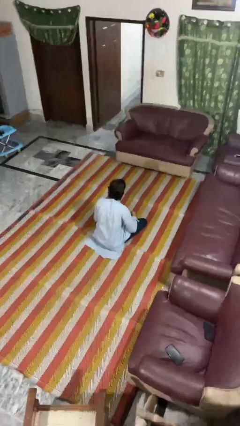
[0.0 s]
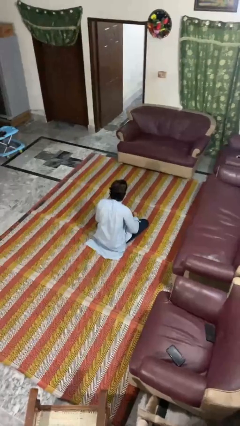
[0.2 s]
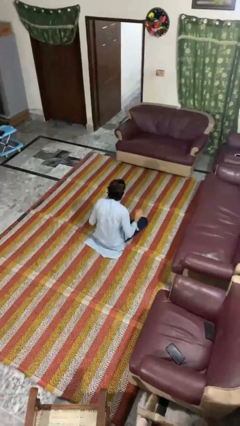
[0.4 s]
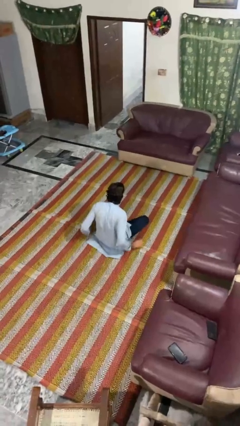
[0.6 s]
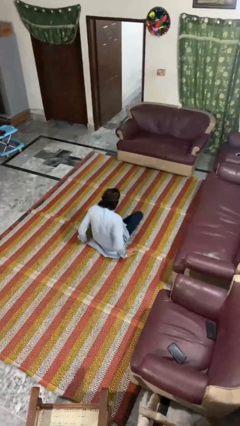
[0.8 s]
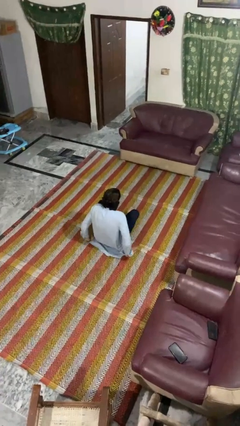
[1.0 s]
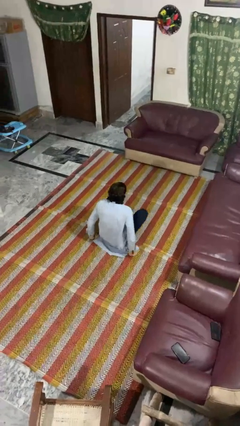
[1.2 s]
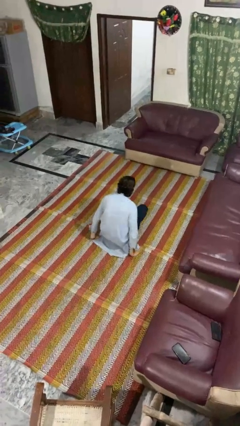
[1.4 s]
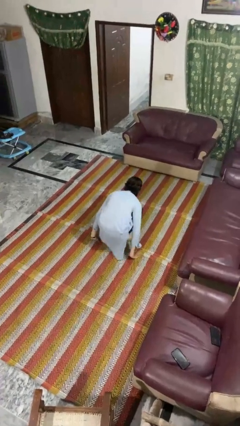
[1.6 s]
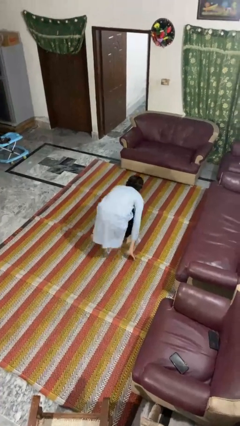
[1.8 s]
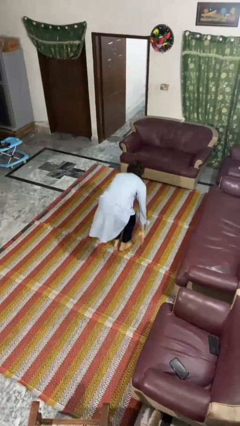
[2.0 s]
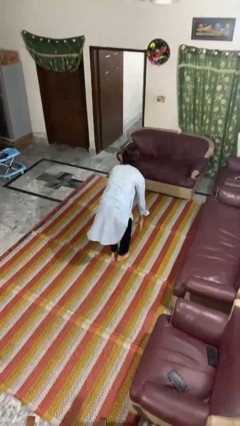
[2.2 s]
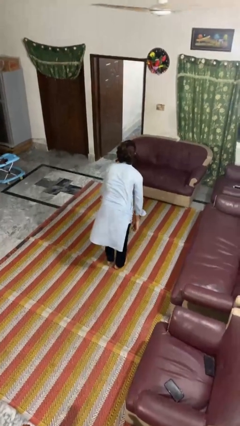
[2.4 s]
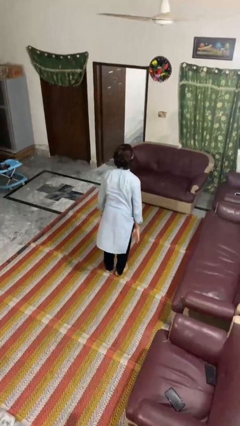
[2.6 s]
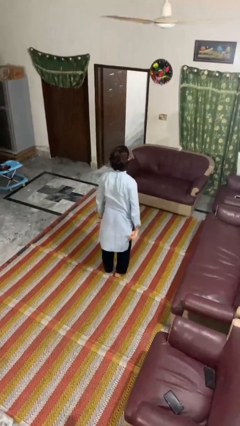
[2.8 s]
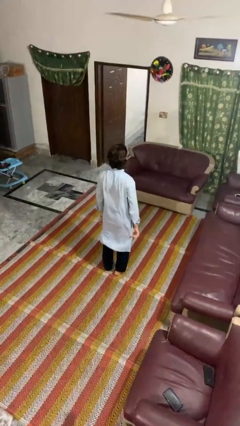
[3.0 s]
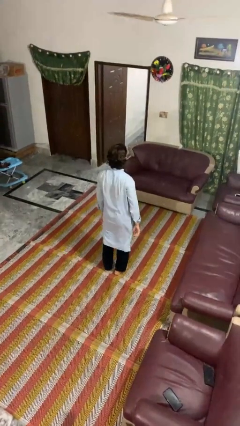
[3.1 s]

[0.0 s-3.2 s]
person stands up from floor

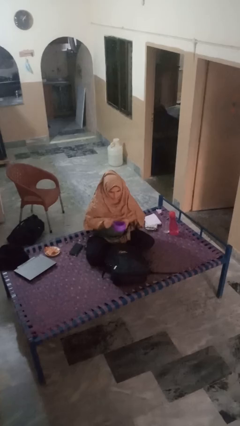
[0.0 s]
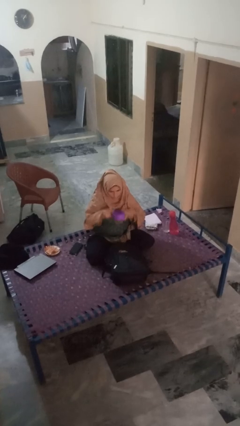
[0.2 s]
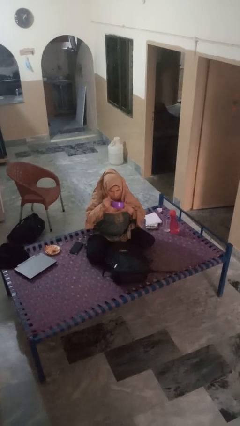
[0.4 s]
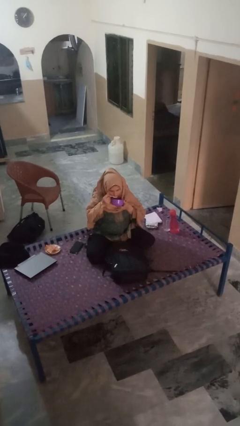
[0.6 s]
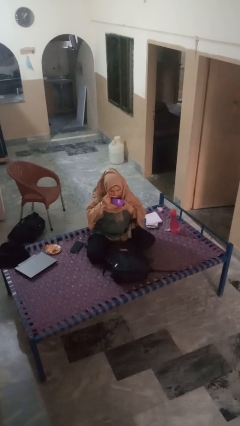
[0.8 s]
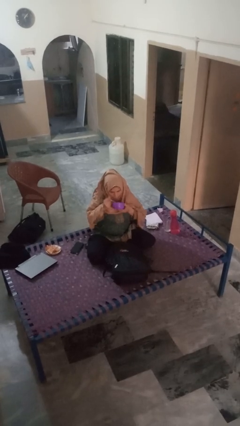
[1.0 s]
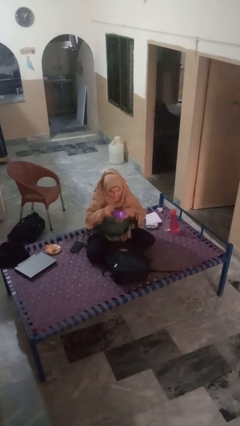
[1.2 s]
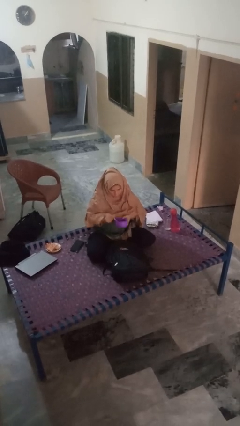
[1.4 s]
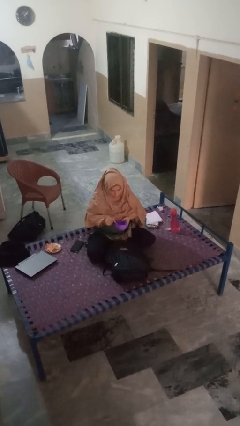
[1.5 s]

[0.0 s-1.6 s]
person eats snack from bag

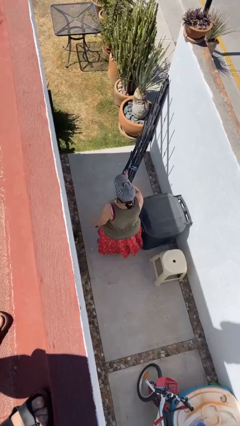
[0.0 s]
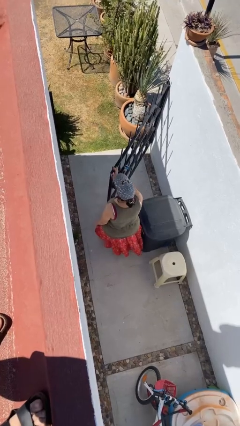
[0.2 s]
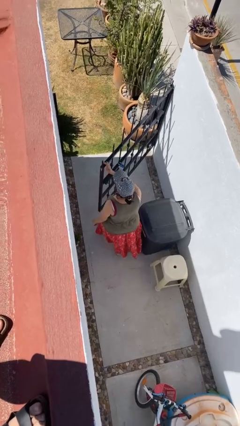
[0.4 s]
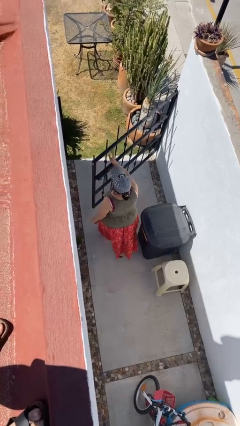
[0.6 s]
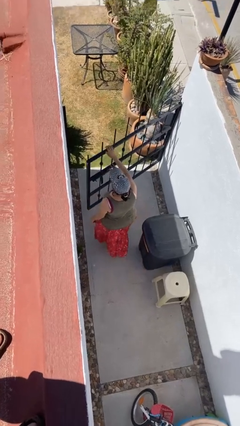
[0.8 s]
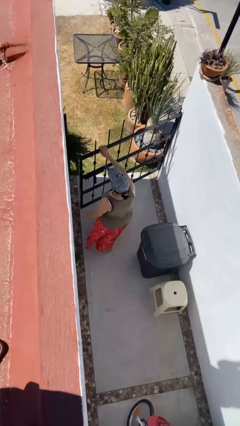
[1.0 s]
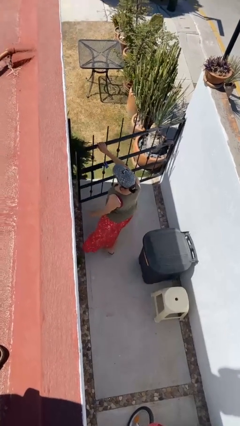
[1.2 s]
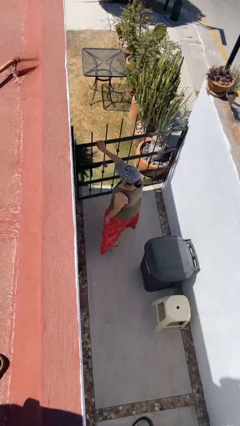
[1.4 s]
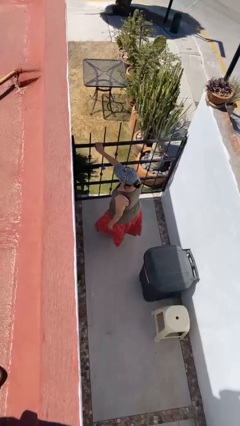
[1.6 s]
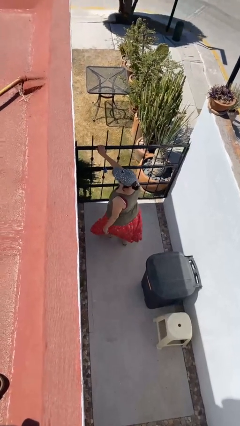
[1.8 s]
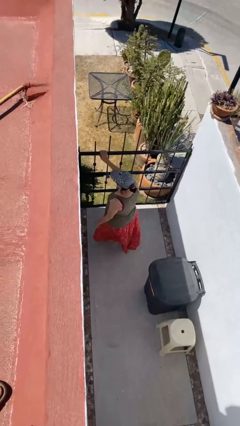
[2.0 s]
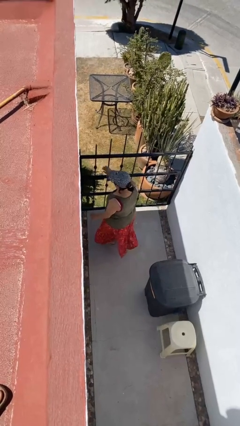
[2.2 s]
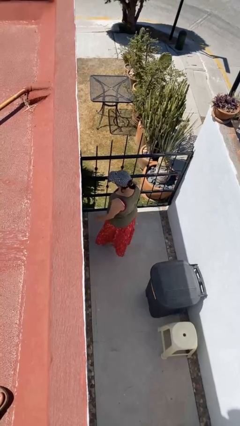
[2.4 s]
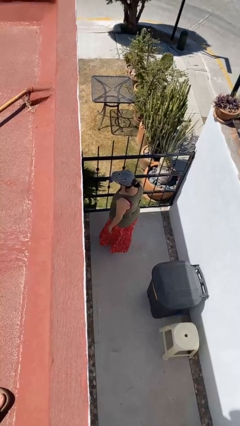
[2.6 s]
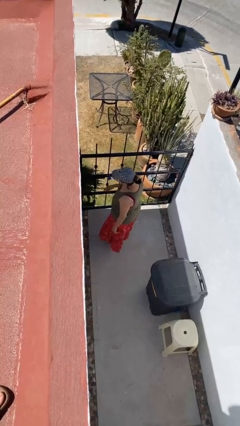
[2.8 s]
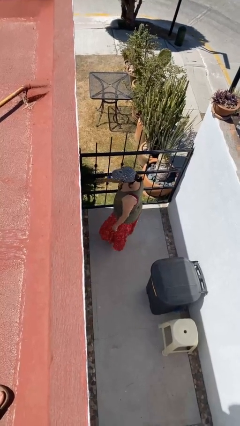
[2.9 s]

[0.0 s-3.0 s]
person closes facility door

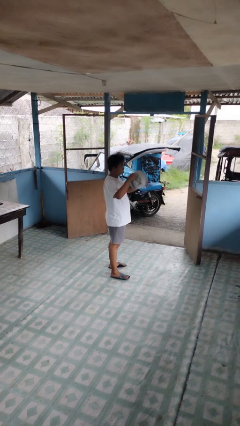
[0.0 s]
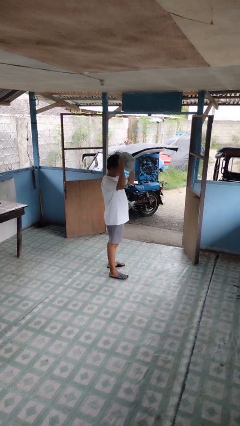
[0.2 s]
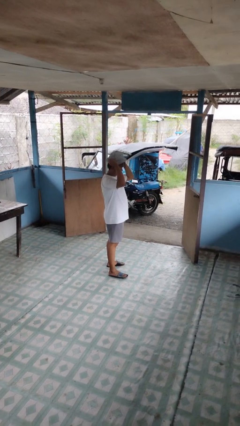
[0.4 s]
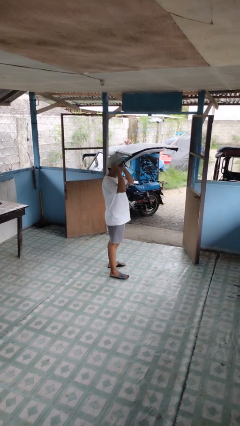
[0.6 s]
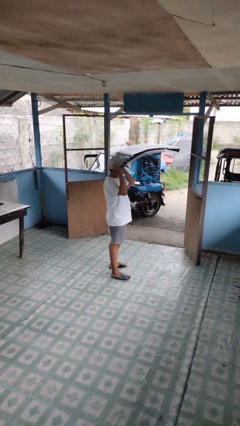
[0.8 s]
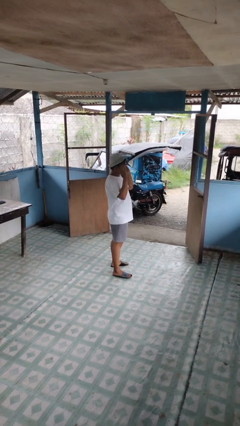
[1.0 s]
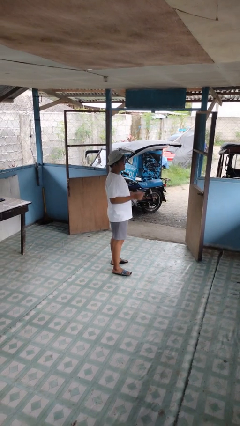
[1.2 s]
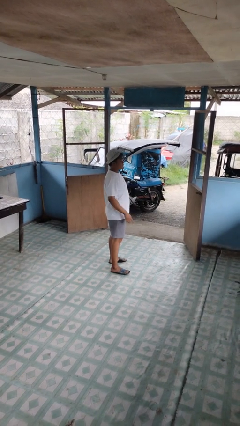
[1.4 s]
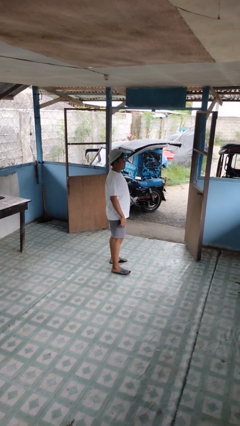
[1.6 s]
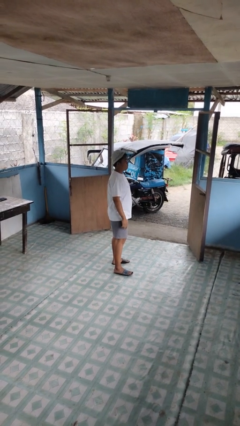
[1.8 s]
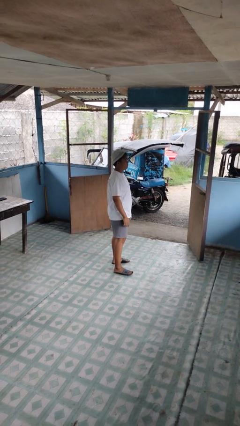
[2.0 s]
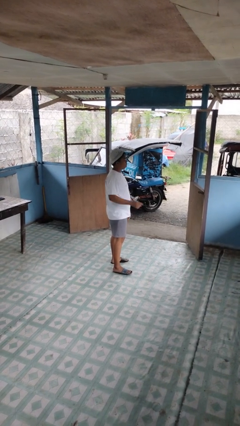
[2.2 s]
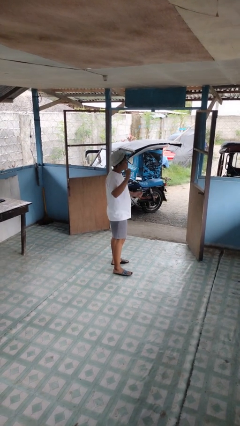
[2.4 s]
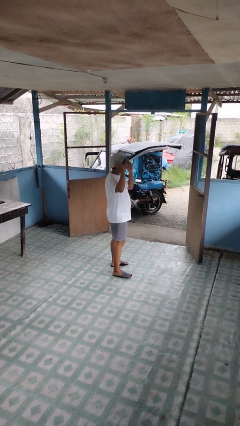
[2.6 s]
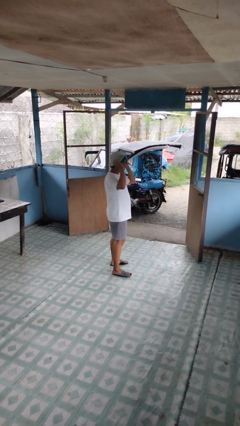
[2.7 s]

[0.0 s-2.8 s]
person puts on hat

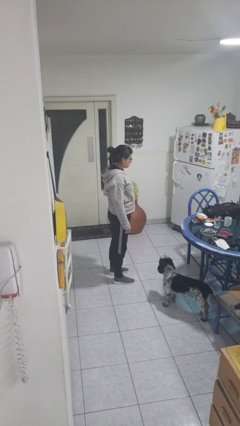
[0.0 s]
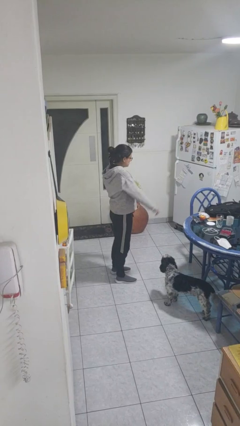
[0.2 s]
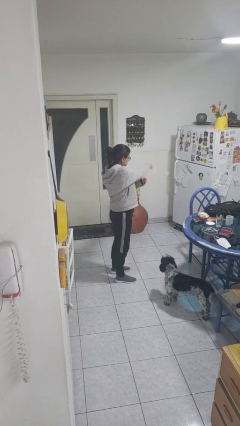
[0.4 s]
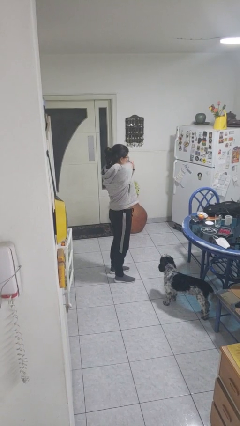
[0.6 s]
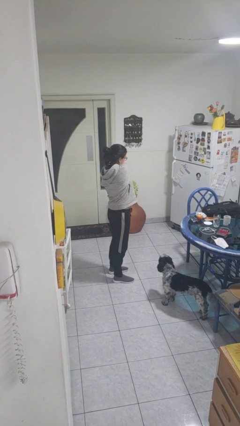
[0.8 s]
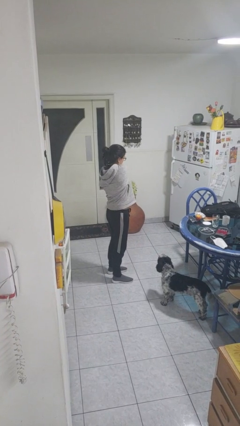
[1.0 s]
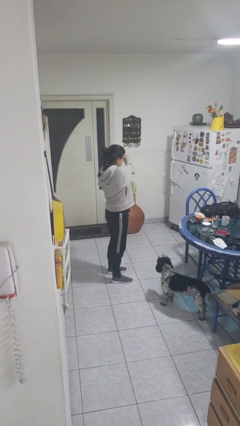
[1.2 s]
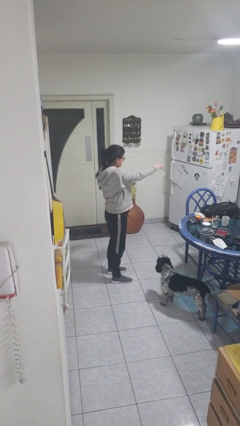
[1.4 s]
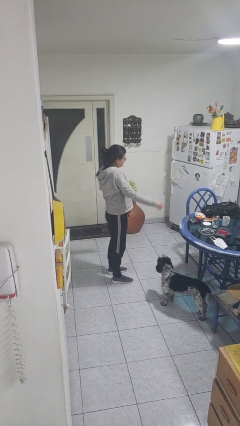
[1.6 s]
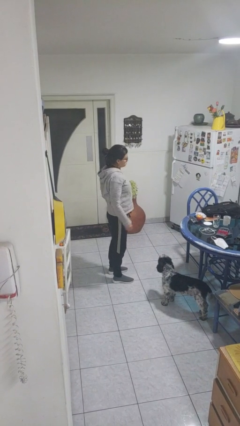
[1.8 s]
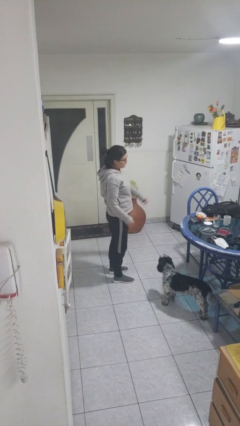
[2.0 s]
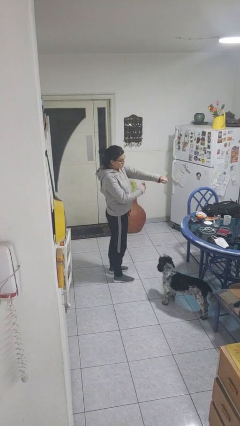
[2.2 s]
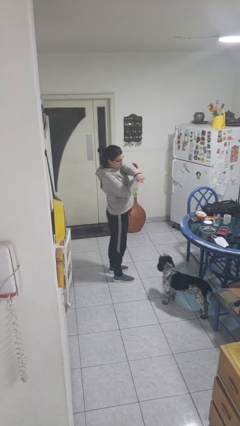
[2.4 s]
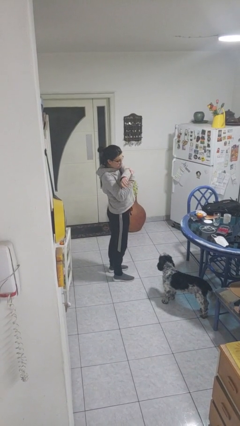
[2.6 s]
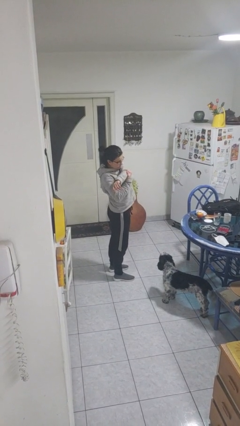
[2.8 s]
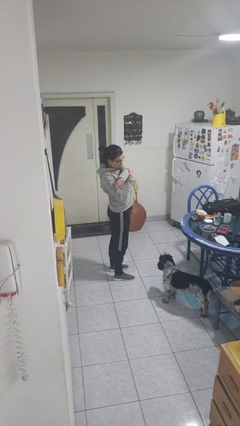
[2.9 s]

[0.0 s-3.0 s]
person stretches arms to side

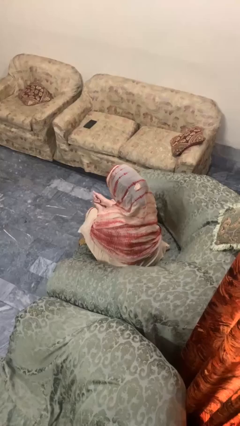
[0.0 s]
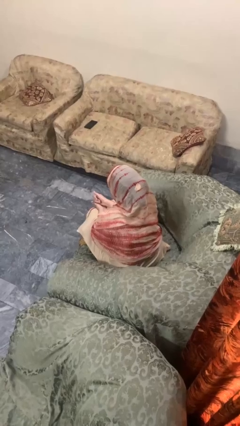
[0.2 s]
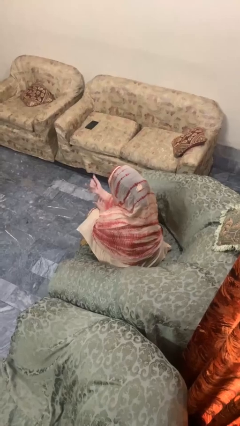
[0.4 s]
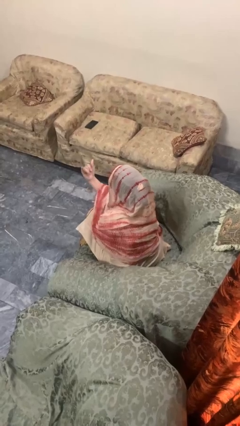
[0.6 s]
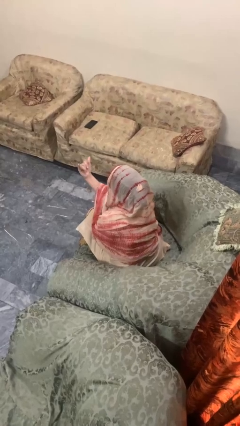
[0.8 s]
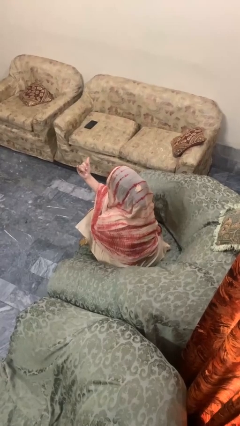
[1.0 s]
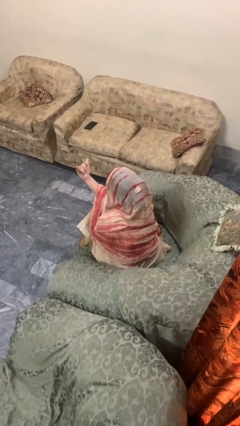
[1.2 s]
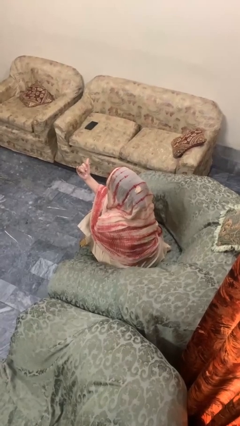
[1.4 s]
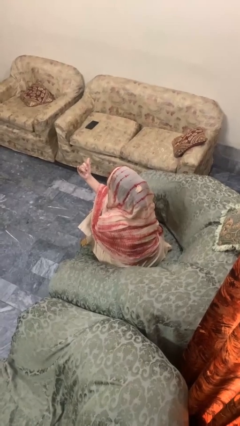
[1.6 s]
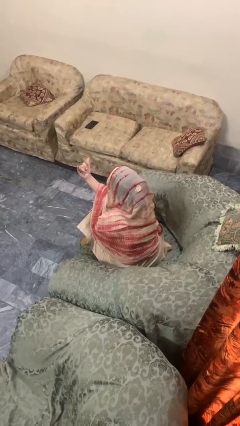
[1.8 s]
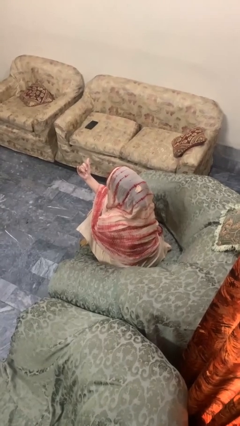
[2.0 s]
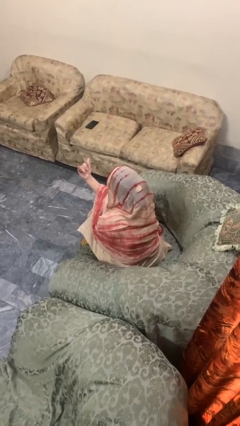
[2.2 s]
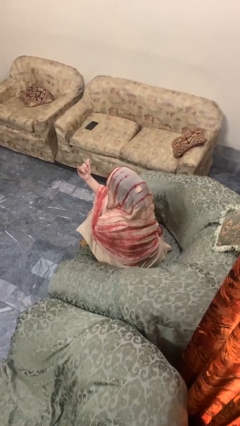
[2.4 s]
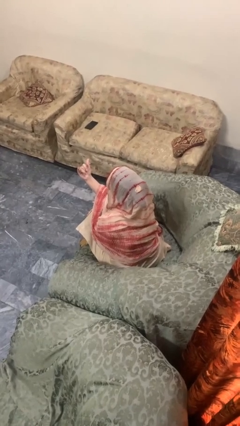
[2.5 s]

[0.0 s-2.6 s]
person gestures hang loose

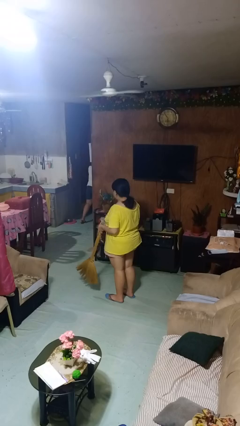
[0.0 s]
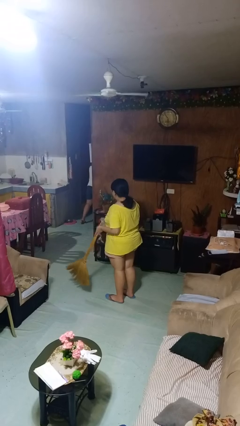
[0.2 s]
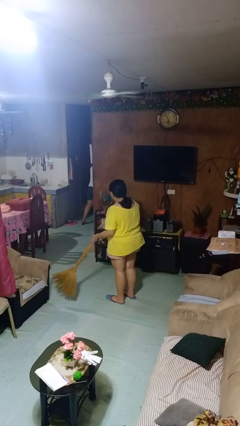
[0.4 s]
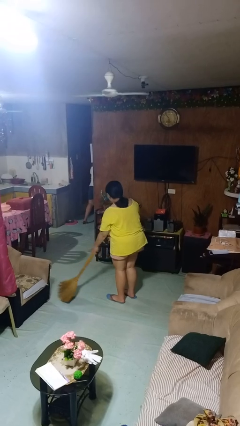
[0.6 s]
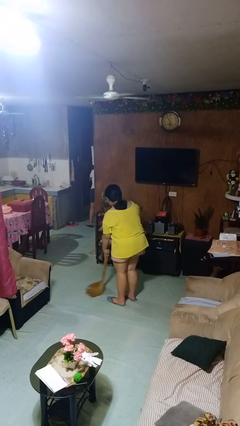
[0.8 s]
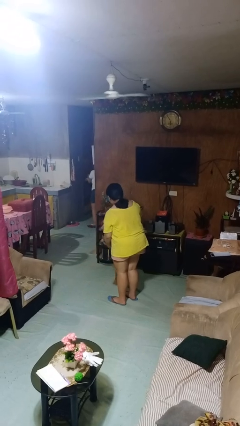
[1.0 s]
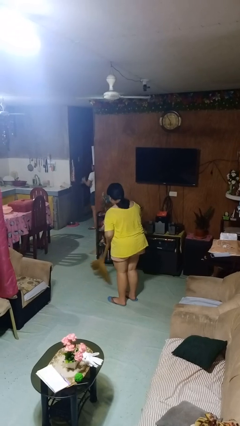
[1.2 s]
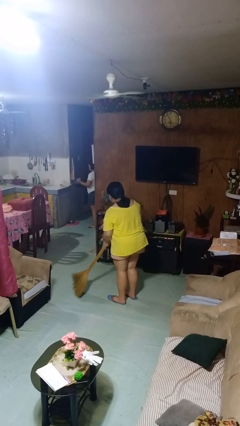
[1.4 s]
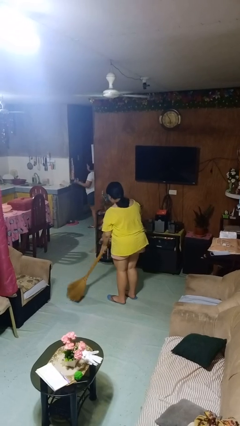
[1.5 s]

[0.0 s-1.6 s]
person sweeps floor
